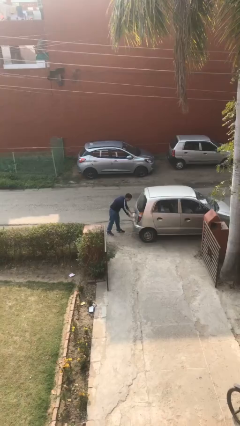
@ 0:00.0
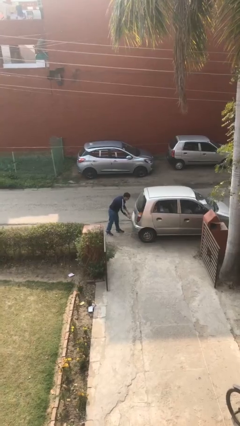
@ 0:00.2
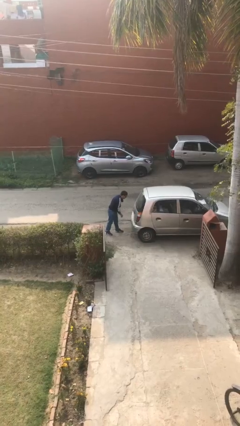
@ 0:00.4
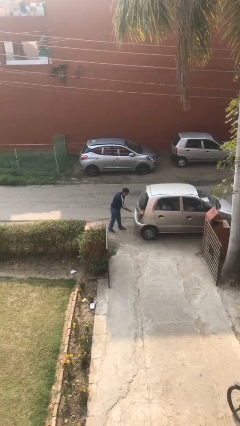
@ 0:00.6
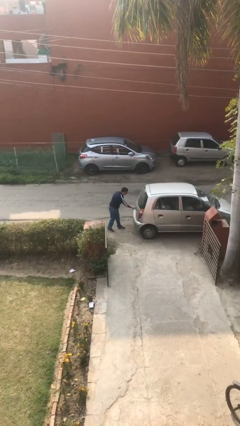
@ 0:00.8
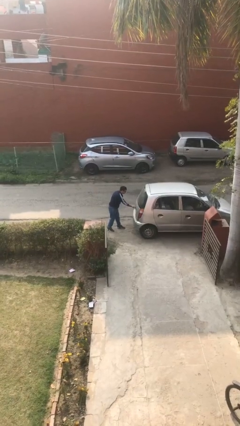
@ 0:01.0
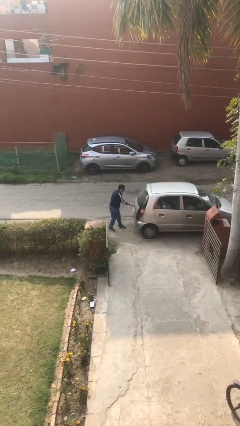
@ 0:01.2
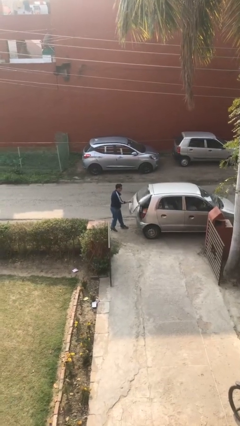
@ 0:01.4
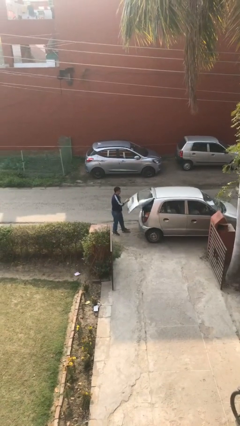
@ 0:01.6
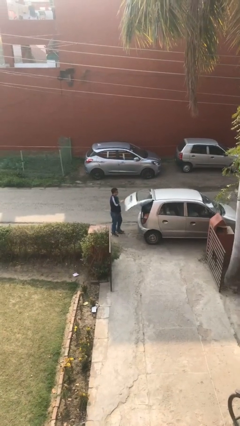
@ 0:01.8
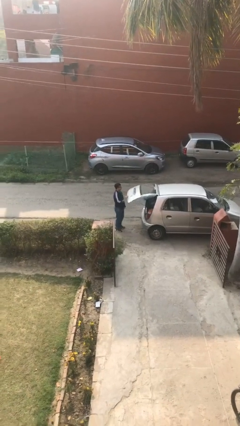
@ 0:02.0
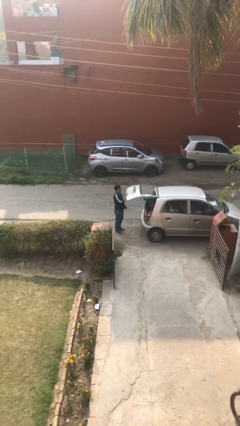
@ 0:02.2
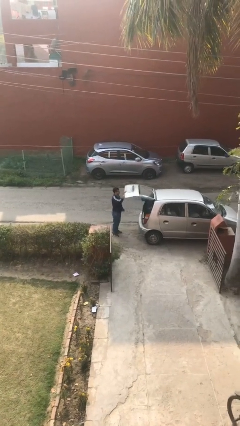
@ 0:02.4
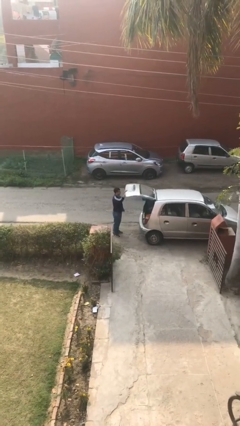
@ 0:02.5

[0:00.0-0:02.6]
person opens car trunk

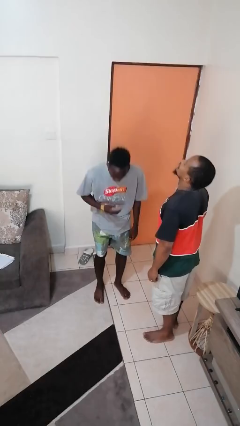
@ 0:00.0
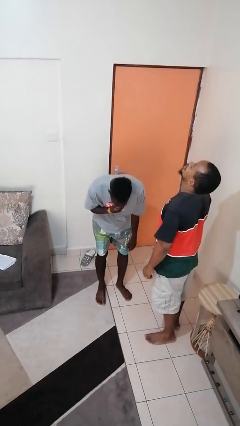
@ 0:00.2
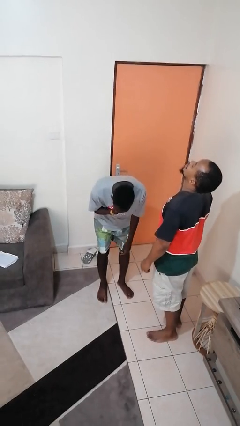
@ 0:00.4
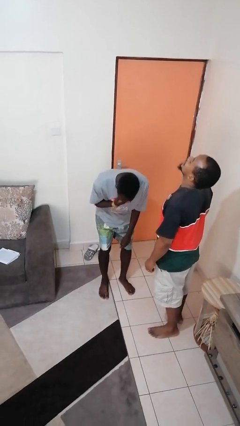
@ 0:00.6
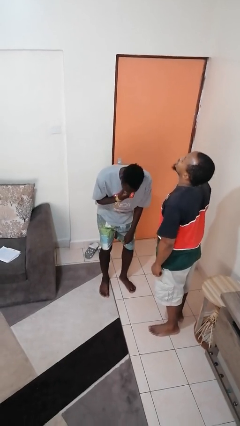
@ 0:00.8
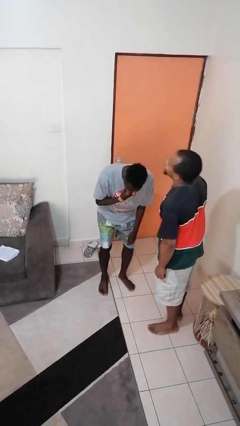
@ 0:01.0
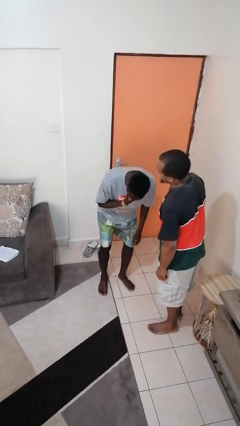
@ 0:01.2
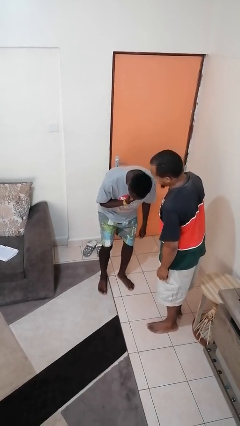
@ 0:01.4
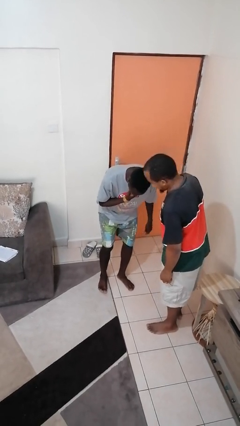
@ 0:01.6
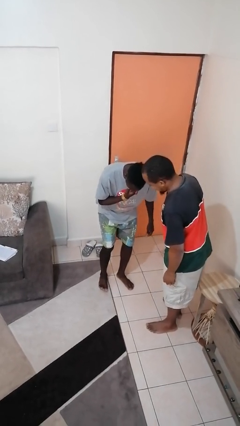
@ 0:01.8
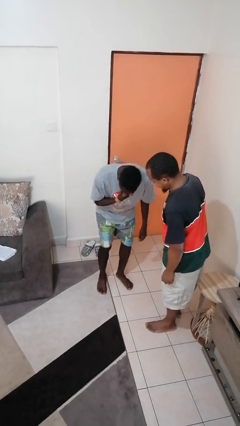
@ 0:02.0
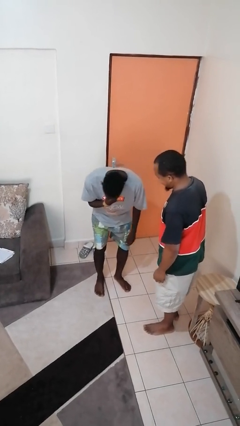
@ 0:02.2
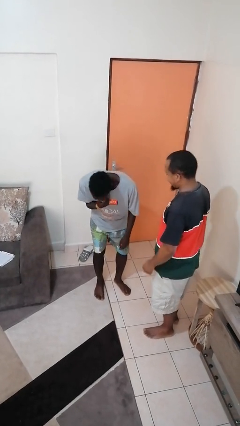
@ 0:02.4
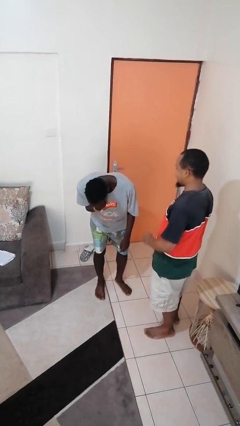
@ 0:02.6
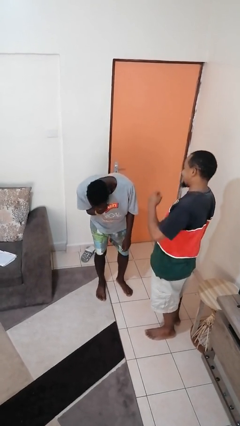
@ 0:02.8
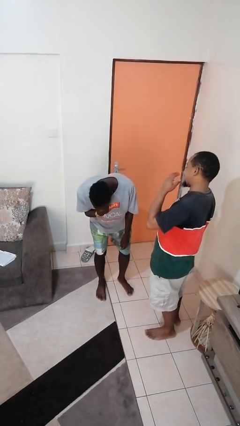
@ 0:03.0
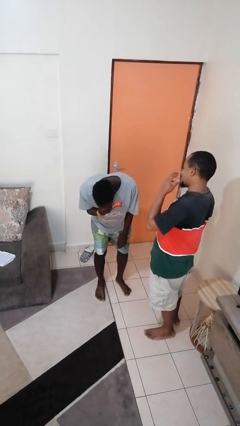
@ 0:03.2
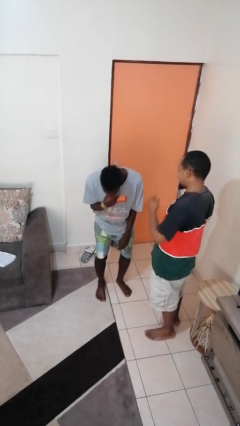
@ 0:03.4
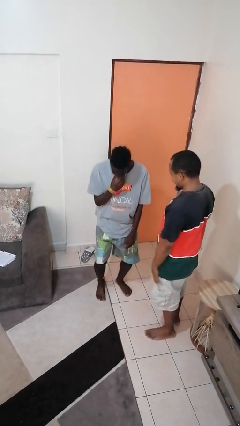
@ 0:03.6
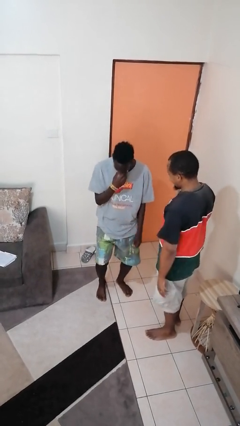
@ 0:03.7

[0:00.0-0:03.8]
person laughs with person

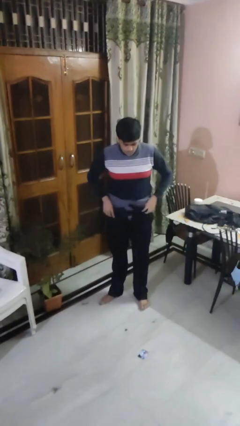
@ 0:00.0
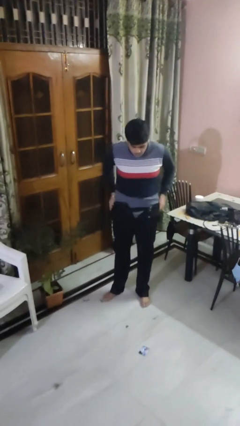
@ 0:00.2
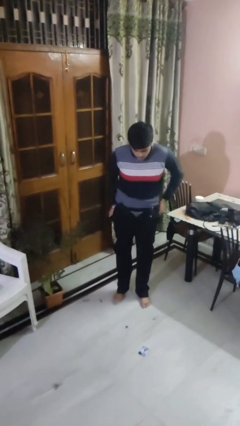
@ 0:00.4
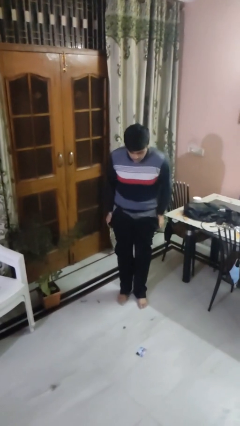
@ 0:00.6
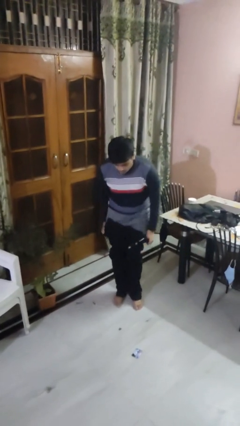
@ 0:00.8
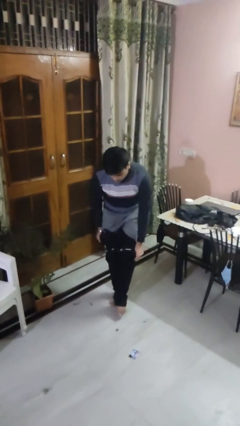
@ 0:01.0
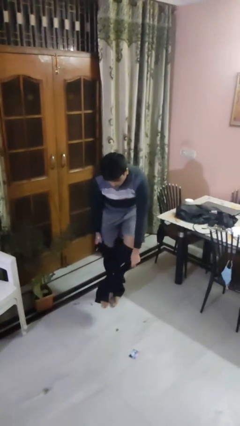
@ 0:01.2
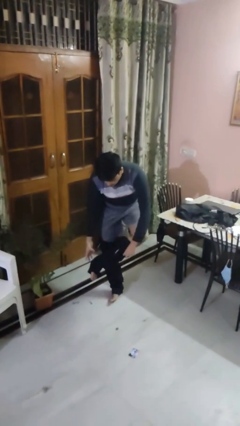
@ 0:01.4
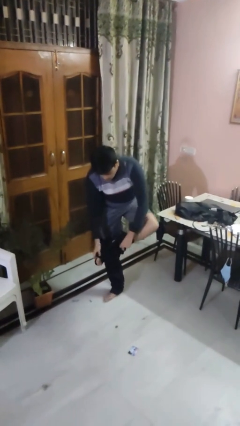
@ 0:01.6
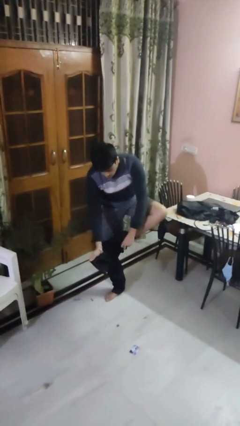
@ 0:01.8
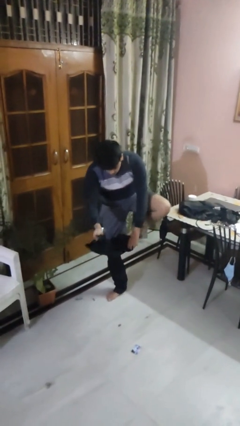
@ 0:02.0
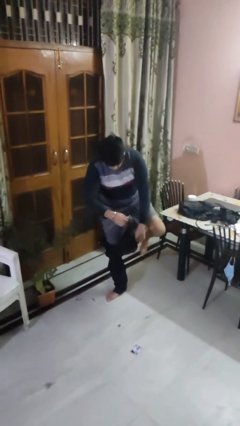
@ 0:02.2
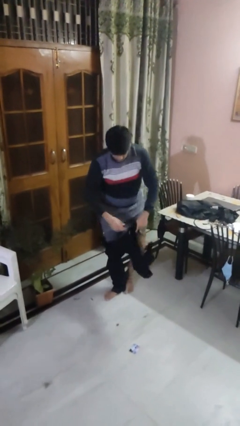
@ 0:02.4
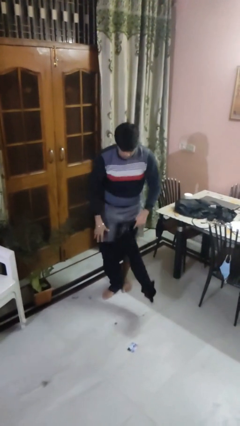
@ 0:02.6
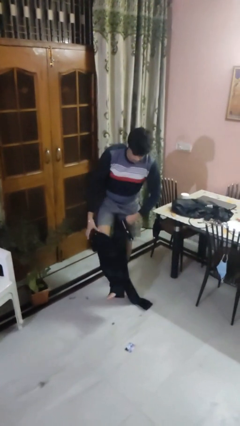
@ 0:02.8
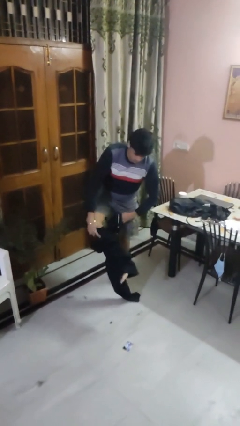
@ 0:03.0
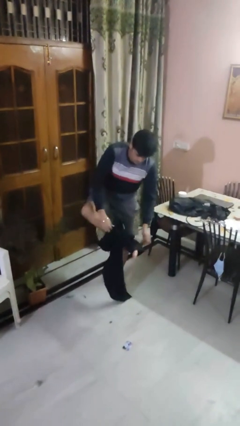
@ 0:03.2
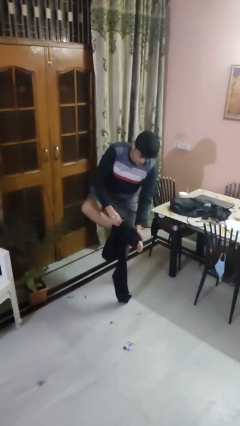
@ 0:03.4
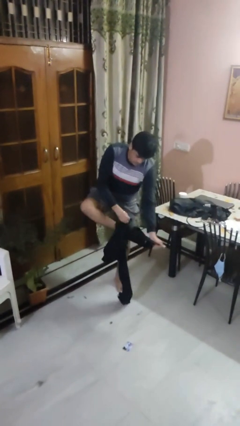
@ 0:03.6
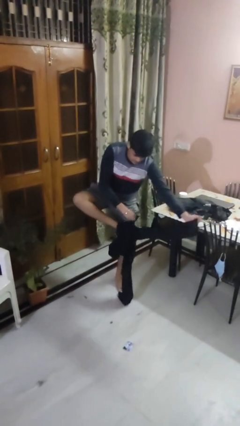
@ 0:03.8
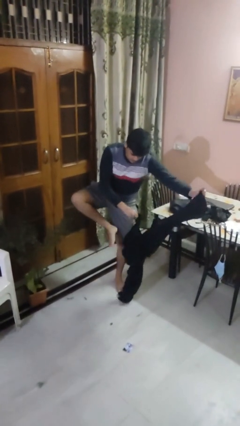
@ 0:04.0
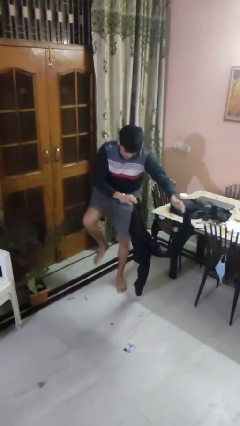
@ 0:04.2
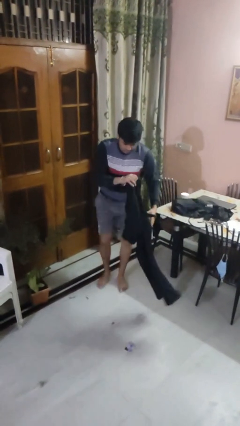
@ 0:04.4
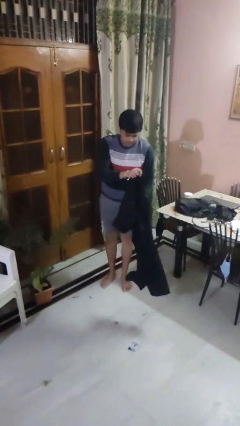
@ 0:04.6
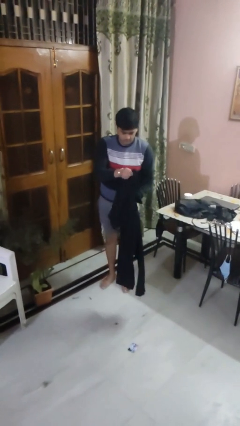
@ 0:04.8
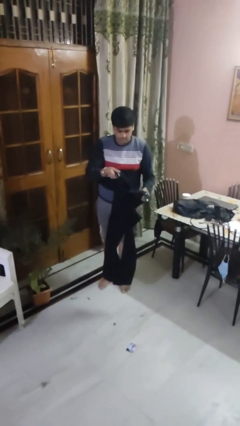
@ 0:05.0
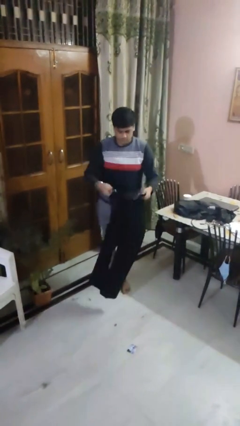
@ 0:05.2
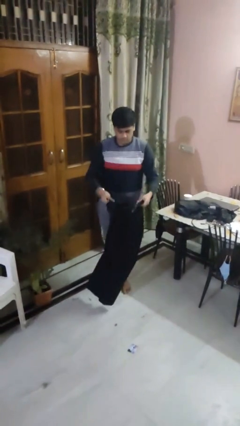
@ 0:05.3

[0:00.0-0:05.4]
person takes off pants

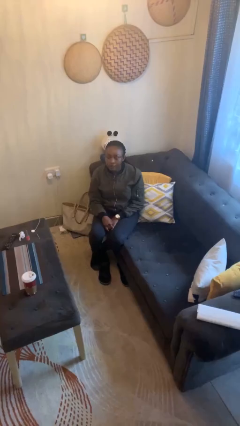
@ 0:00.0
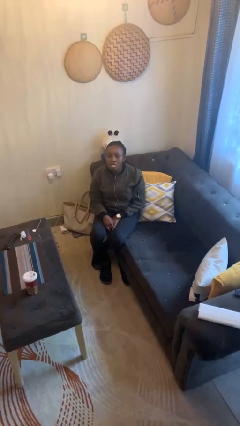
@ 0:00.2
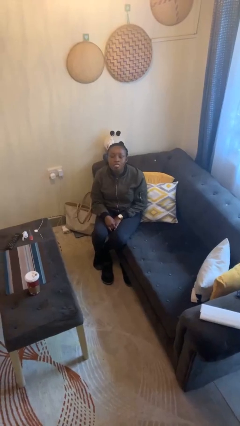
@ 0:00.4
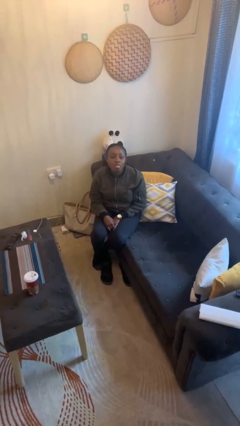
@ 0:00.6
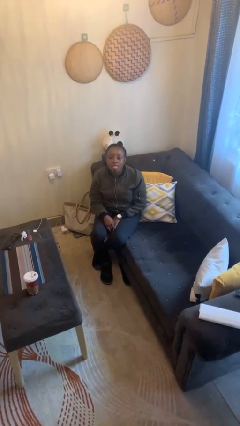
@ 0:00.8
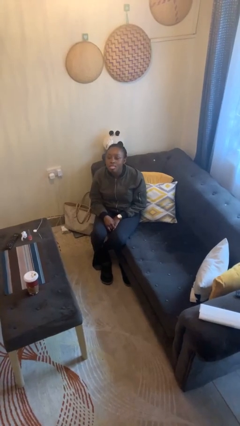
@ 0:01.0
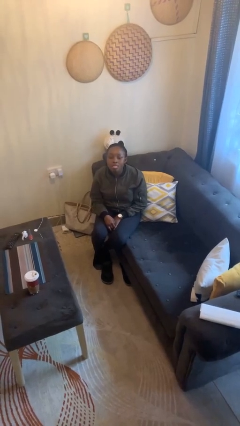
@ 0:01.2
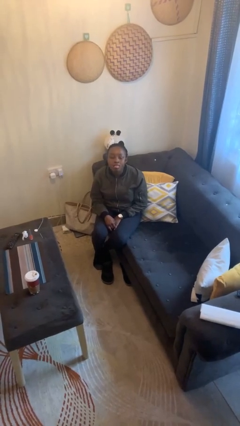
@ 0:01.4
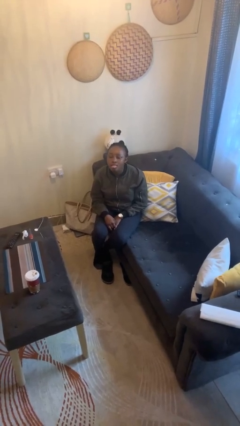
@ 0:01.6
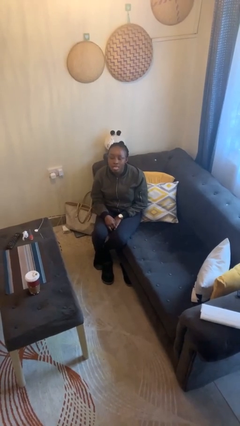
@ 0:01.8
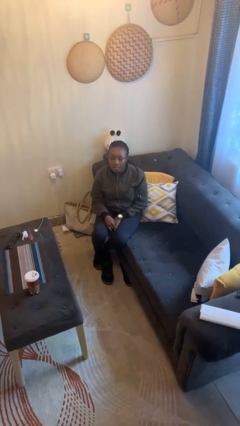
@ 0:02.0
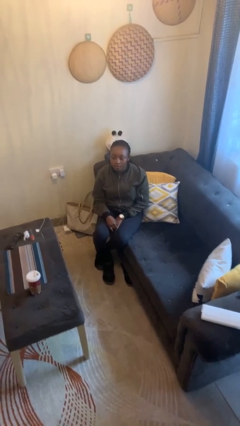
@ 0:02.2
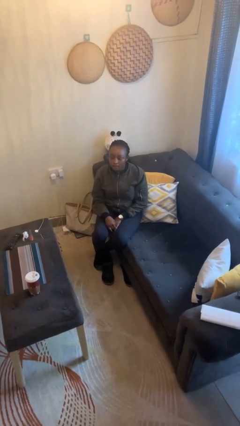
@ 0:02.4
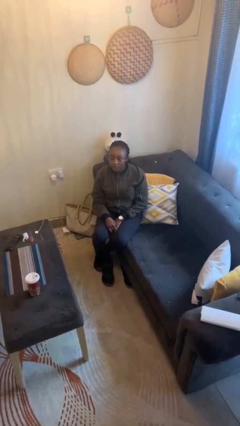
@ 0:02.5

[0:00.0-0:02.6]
person sticks out tongue

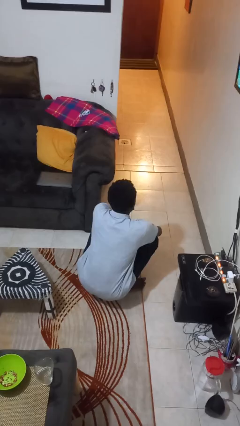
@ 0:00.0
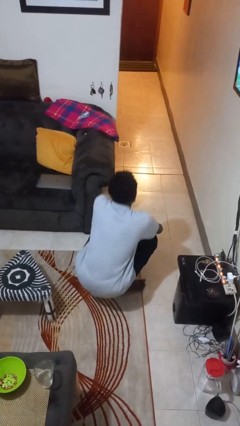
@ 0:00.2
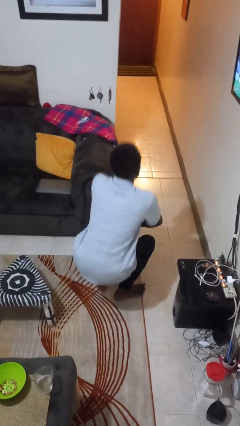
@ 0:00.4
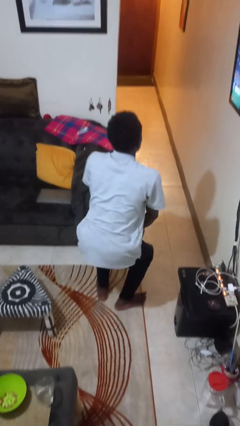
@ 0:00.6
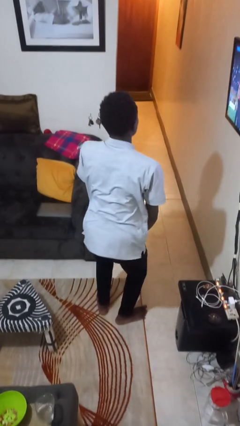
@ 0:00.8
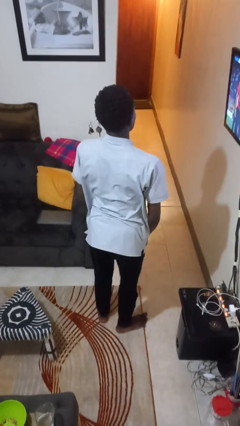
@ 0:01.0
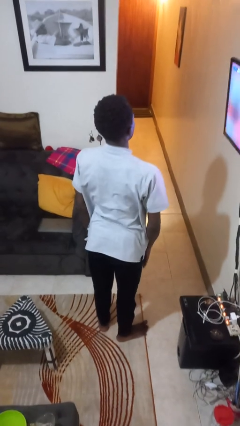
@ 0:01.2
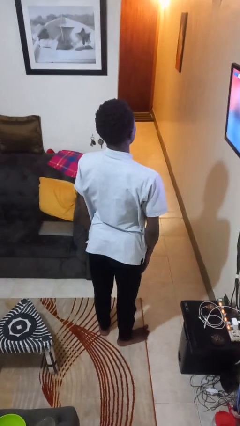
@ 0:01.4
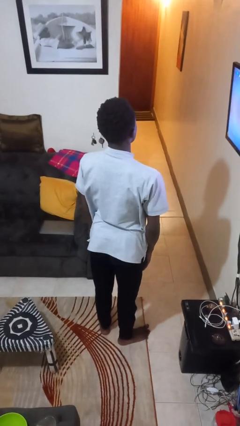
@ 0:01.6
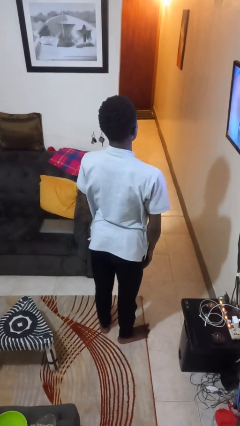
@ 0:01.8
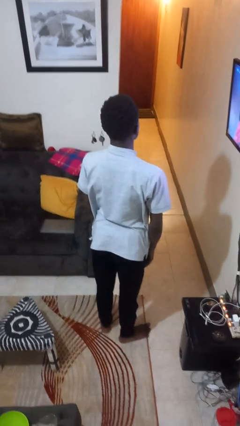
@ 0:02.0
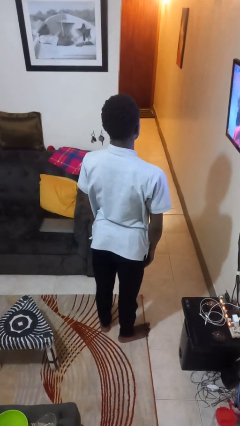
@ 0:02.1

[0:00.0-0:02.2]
person stands up

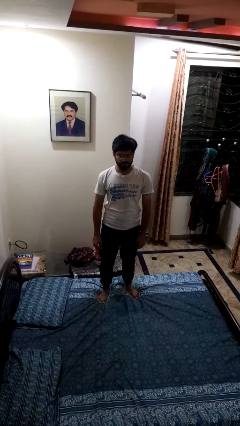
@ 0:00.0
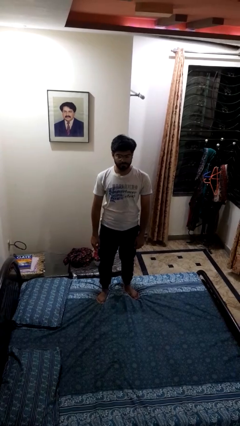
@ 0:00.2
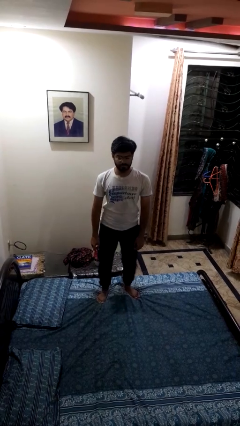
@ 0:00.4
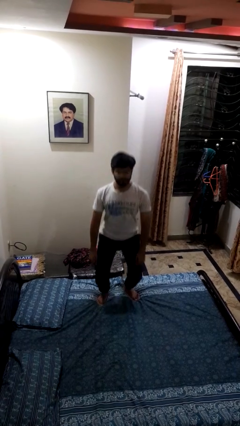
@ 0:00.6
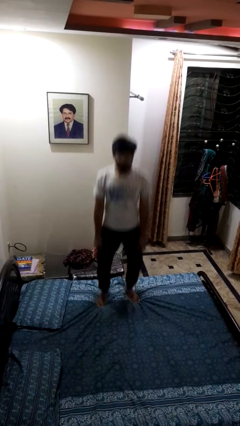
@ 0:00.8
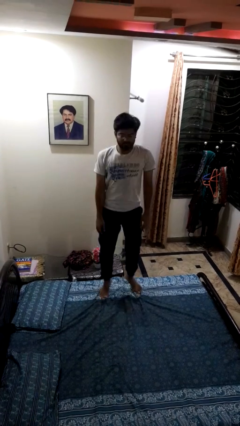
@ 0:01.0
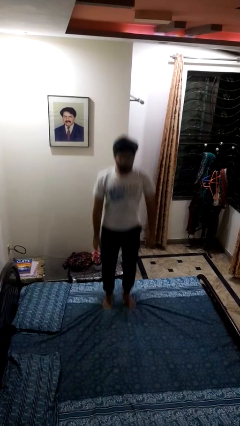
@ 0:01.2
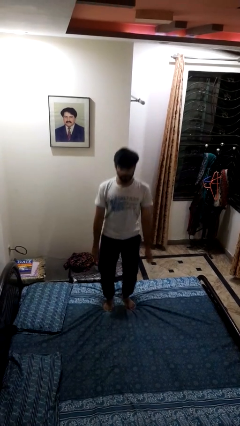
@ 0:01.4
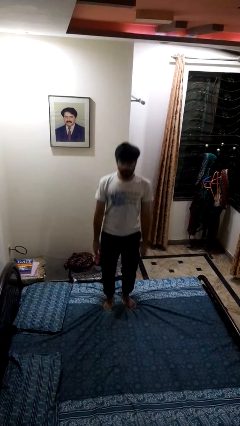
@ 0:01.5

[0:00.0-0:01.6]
person jumps on bed
